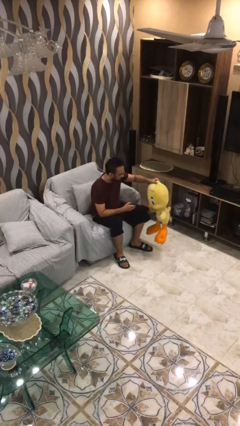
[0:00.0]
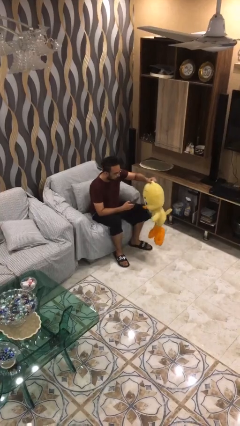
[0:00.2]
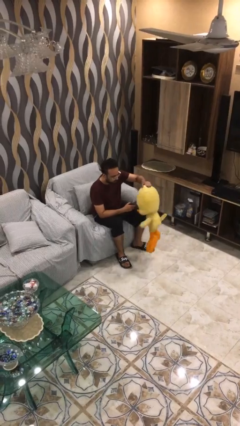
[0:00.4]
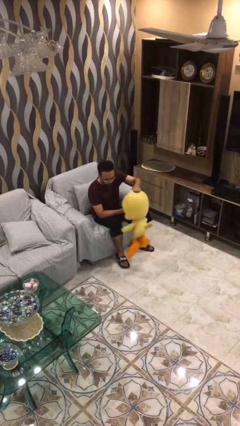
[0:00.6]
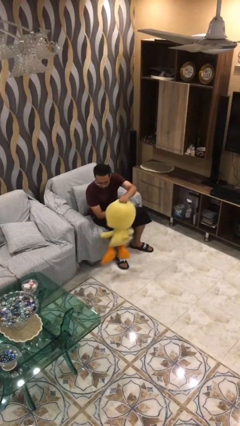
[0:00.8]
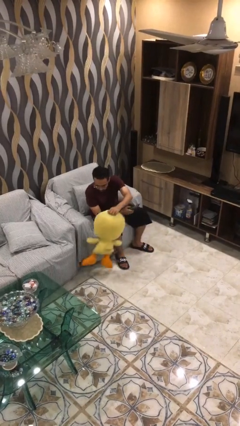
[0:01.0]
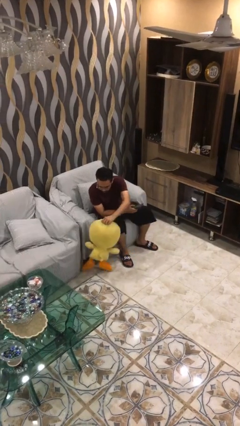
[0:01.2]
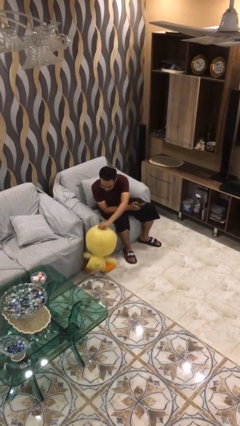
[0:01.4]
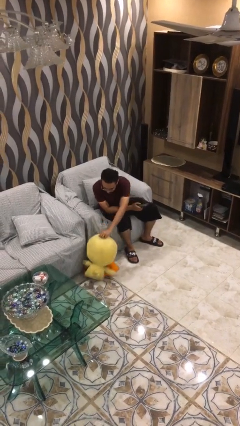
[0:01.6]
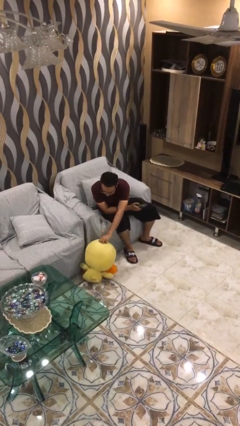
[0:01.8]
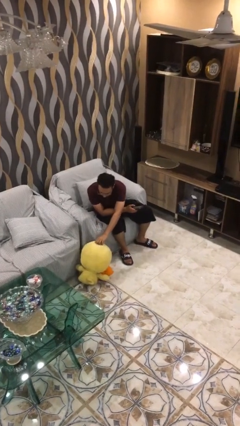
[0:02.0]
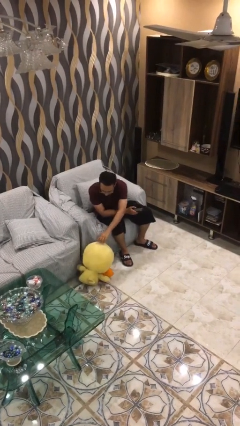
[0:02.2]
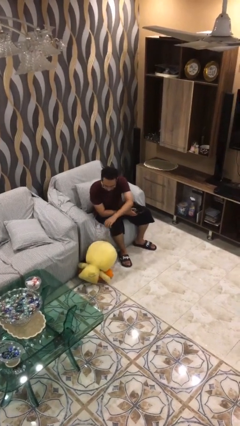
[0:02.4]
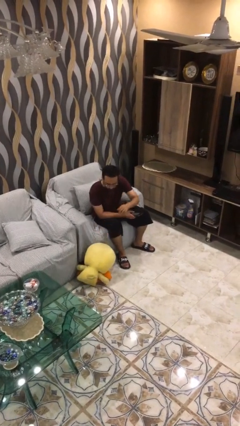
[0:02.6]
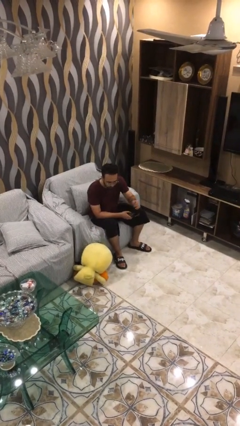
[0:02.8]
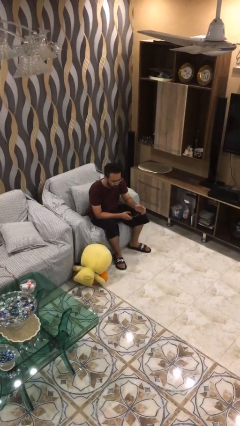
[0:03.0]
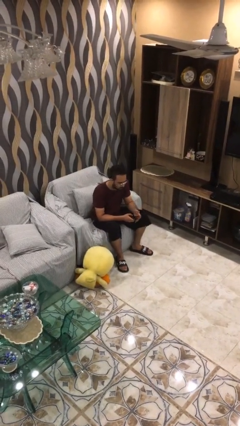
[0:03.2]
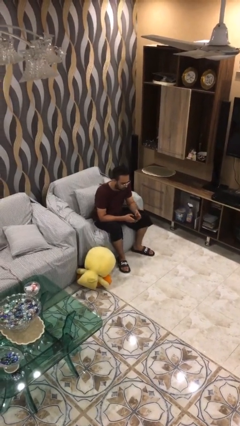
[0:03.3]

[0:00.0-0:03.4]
person puts down object on floor

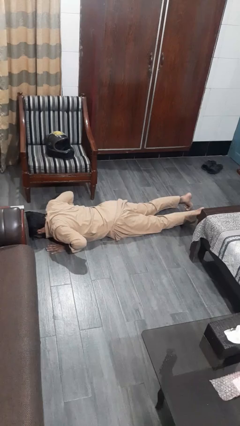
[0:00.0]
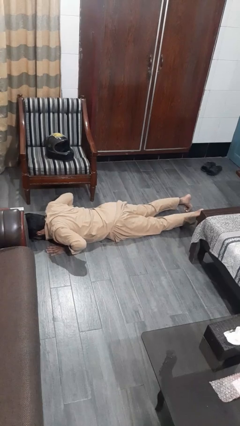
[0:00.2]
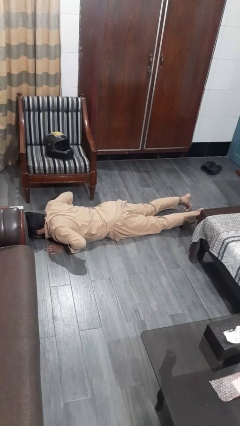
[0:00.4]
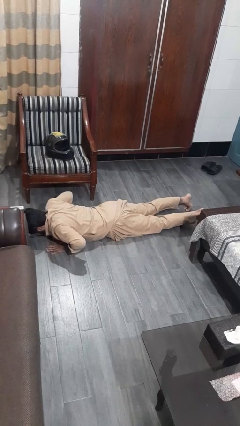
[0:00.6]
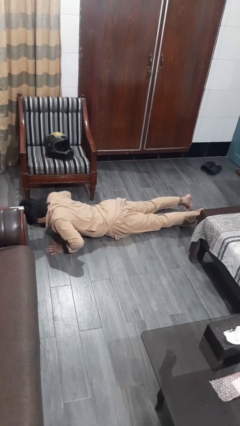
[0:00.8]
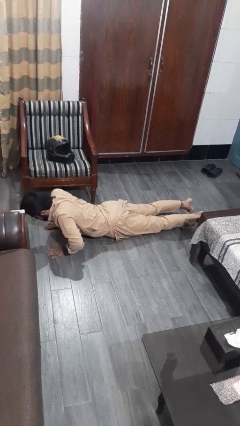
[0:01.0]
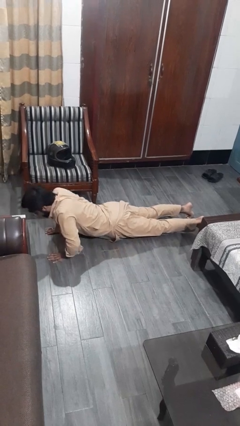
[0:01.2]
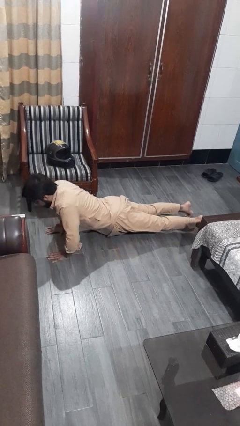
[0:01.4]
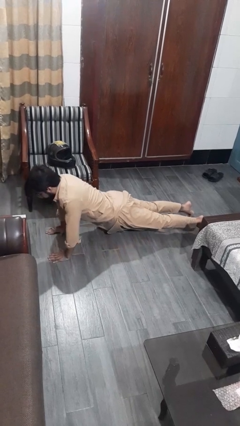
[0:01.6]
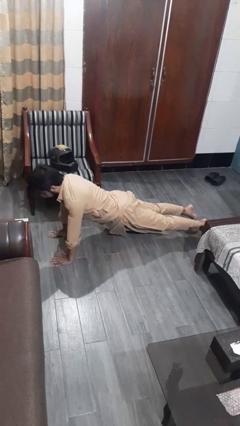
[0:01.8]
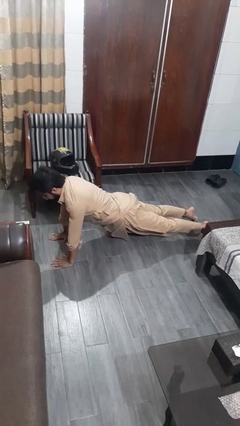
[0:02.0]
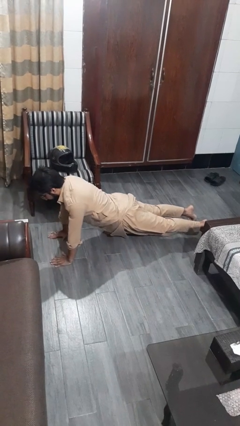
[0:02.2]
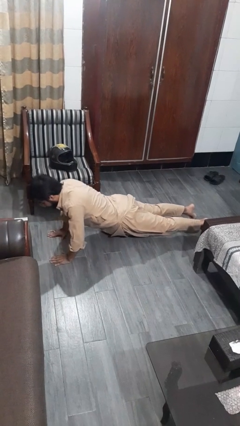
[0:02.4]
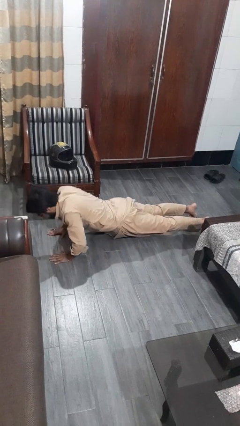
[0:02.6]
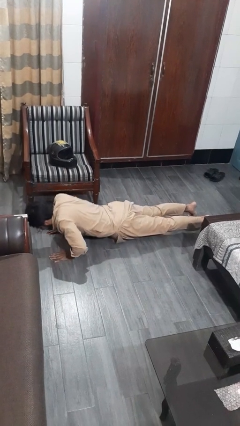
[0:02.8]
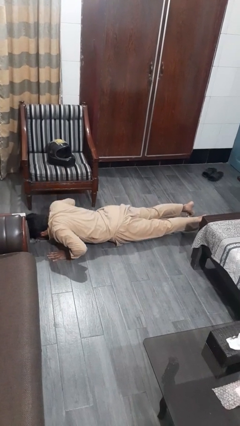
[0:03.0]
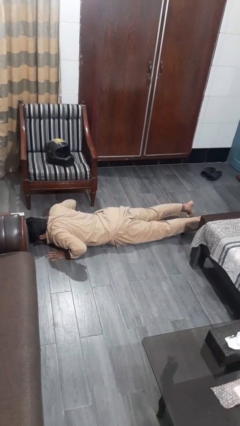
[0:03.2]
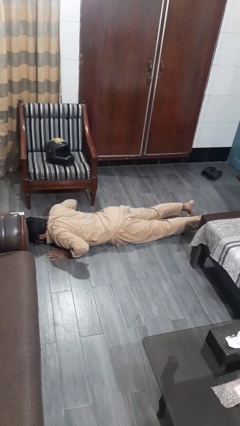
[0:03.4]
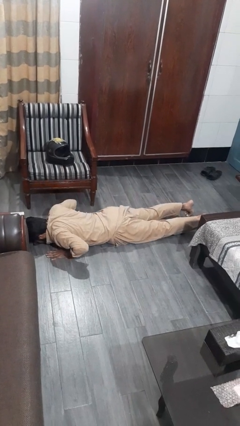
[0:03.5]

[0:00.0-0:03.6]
person exercises with pushup

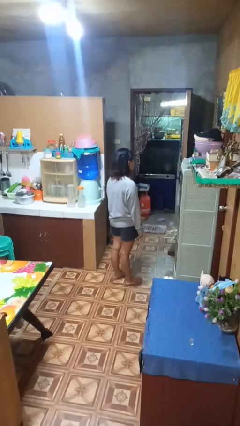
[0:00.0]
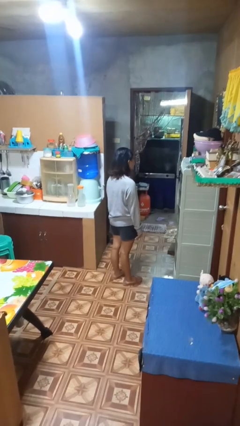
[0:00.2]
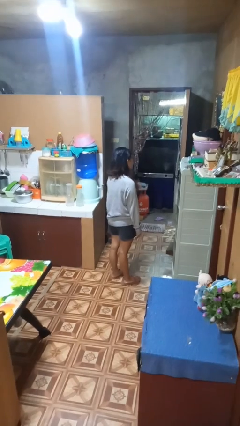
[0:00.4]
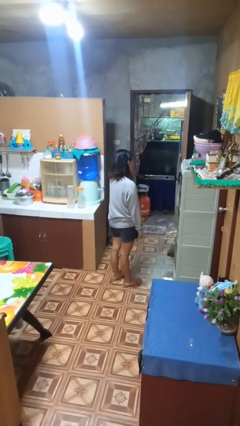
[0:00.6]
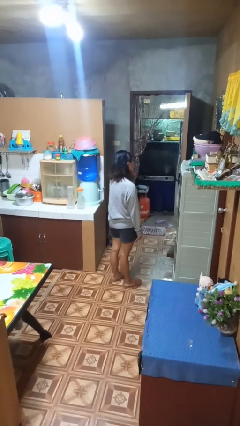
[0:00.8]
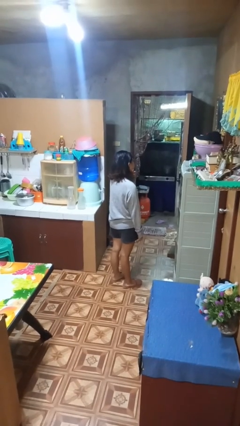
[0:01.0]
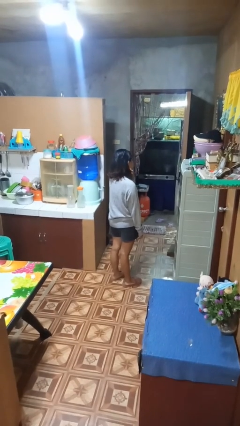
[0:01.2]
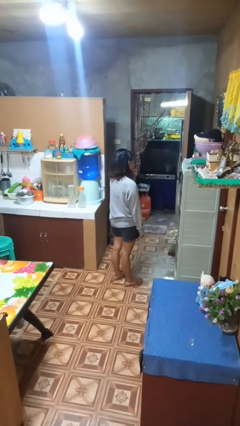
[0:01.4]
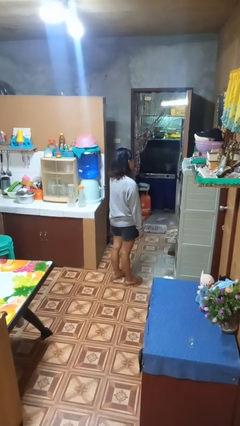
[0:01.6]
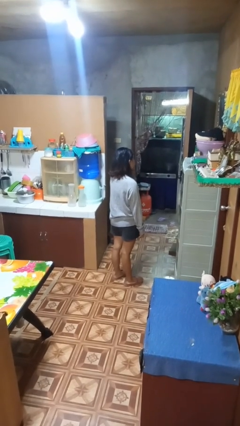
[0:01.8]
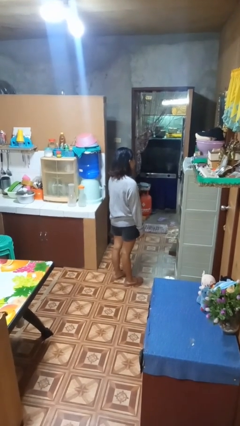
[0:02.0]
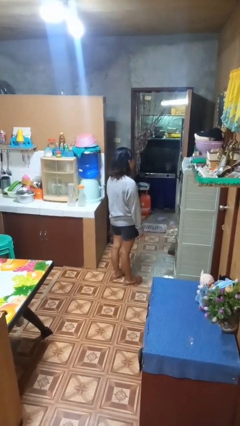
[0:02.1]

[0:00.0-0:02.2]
person strokes chin

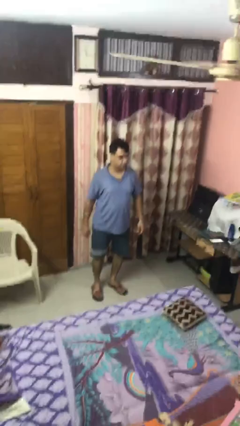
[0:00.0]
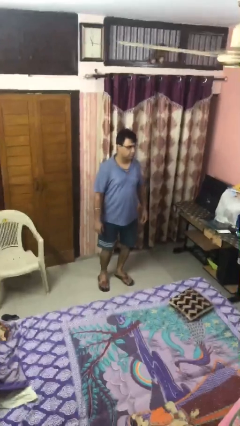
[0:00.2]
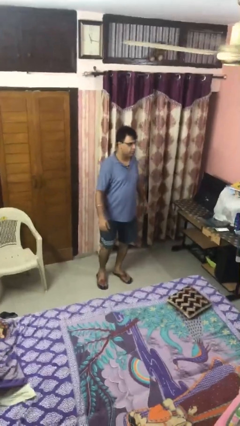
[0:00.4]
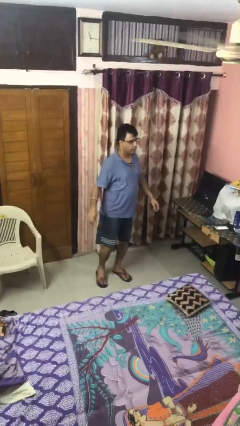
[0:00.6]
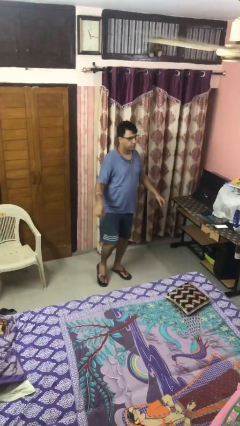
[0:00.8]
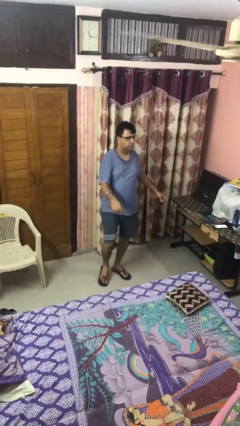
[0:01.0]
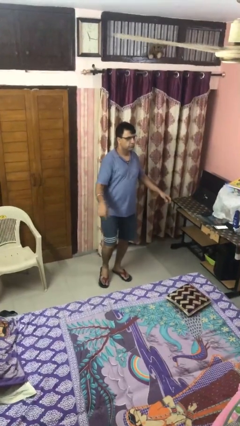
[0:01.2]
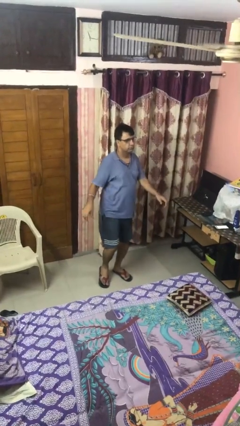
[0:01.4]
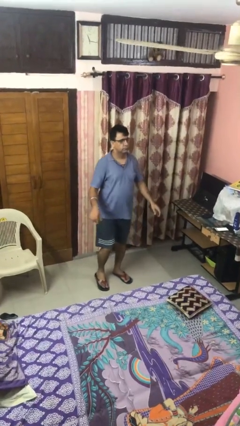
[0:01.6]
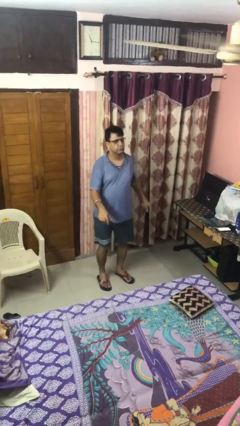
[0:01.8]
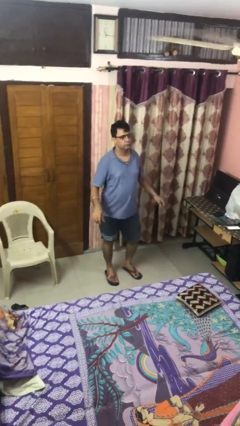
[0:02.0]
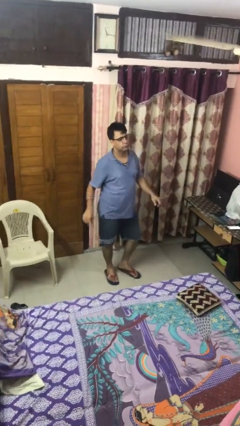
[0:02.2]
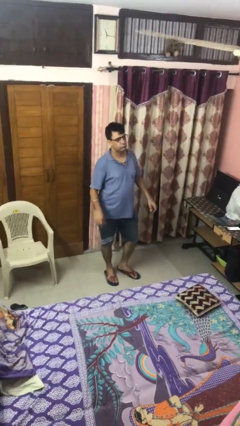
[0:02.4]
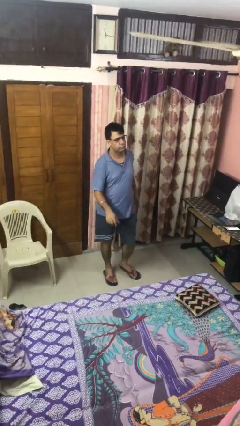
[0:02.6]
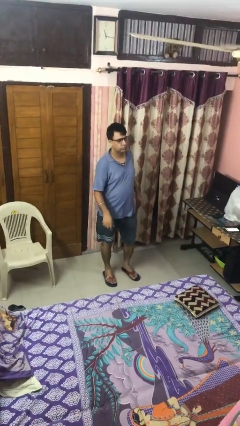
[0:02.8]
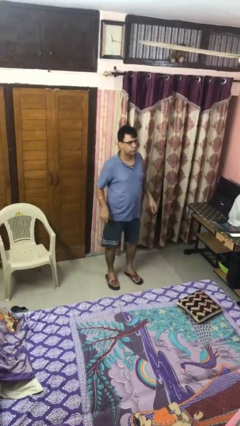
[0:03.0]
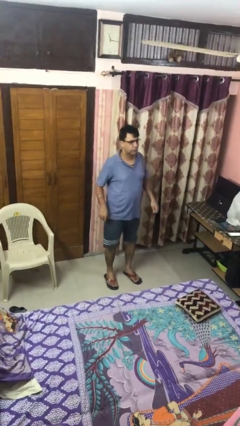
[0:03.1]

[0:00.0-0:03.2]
person dances in place

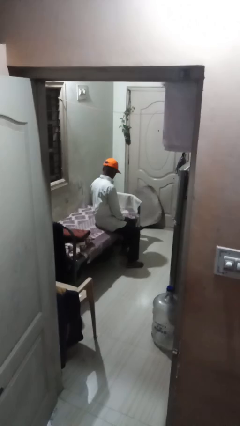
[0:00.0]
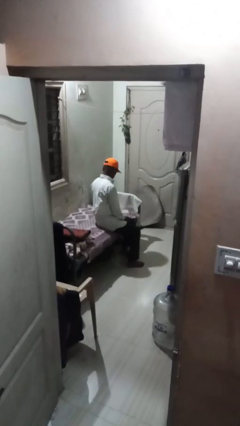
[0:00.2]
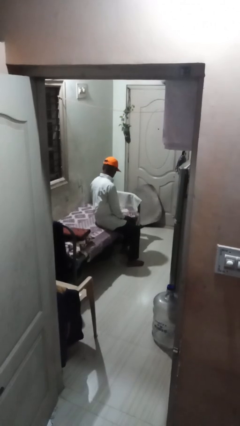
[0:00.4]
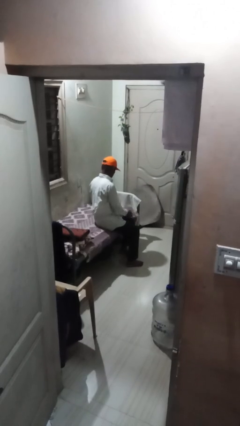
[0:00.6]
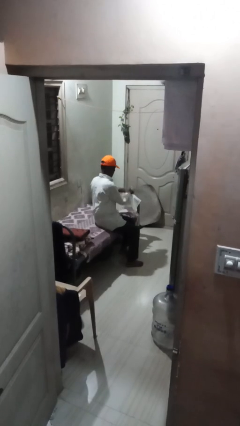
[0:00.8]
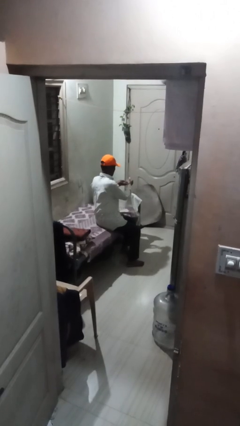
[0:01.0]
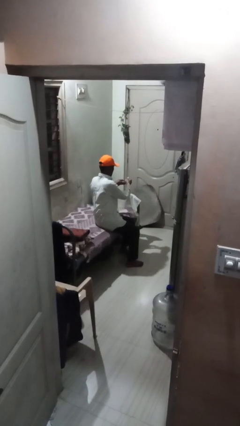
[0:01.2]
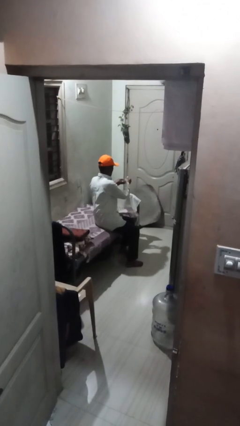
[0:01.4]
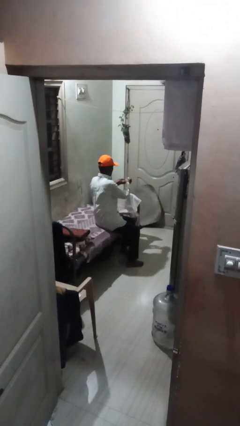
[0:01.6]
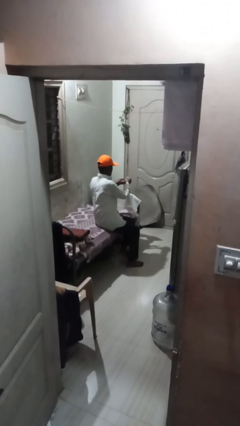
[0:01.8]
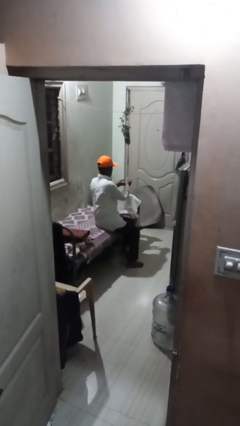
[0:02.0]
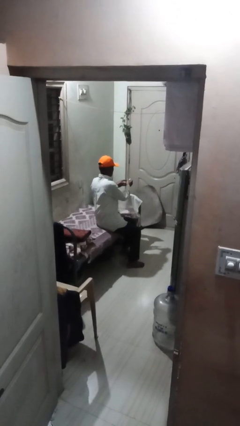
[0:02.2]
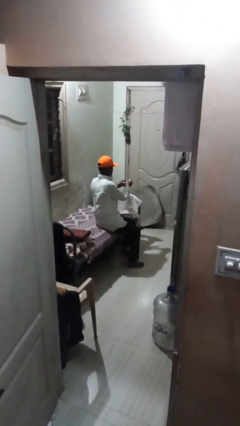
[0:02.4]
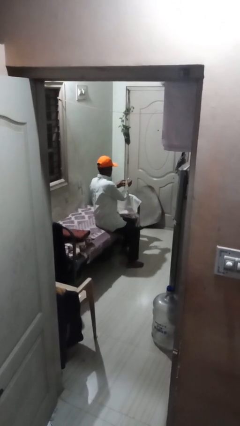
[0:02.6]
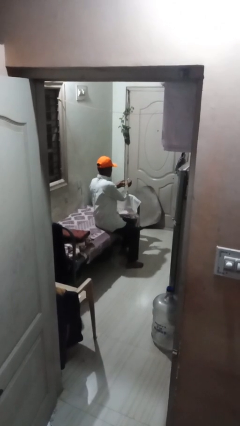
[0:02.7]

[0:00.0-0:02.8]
person clips fingernails

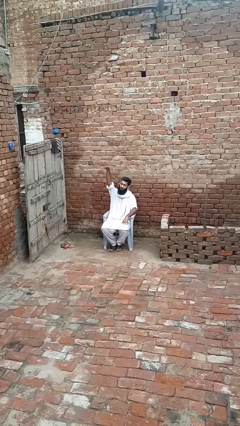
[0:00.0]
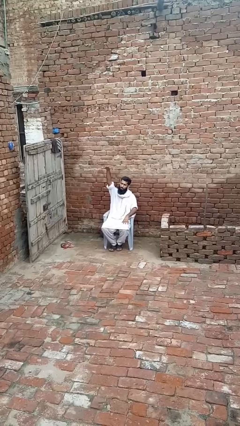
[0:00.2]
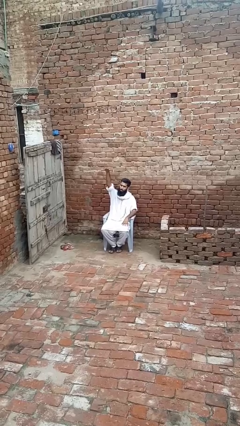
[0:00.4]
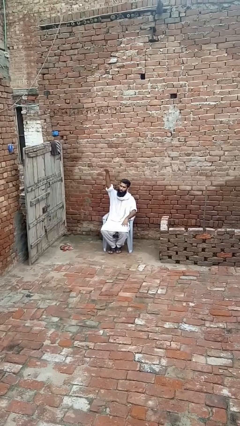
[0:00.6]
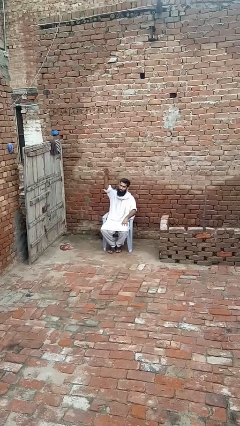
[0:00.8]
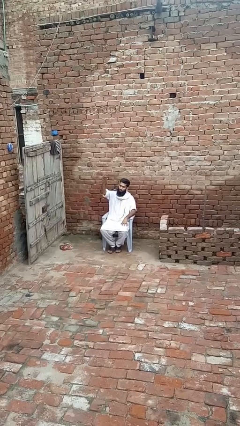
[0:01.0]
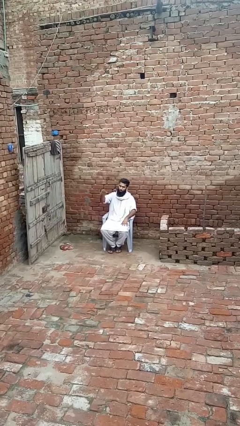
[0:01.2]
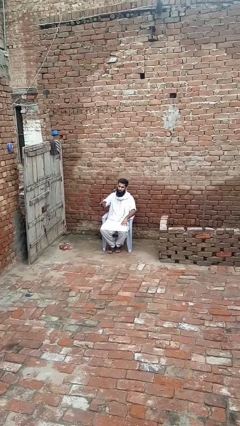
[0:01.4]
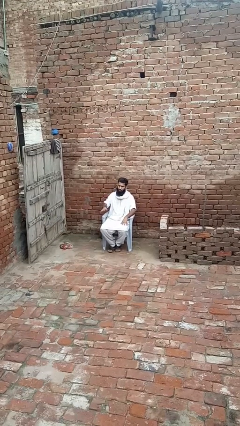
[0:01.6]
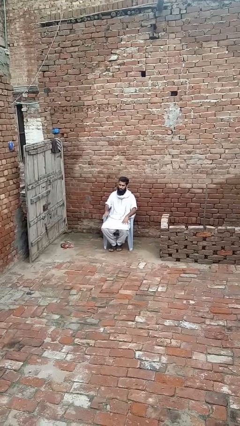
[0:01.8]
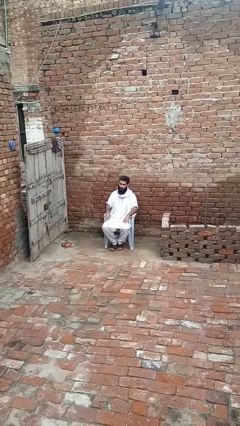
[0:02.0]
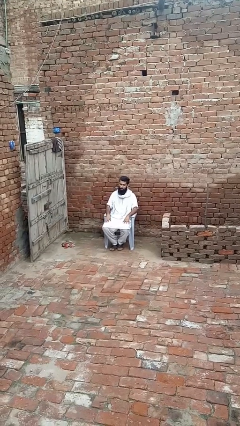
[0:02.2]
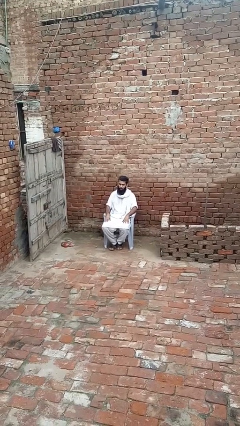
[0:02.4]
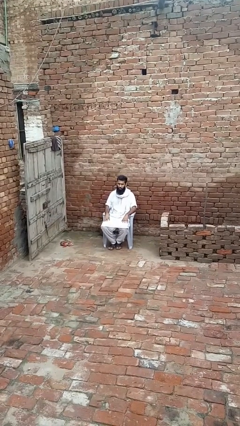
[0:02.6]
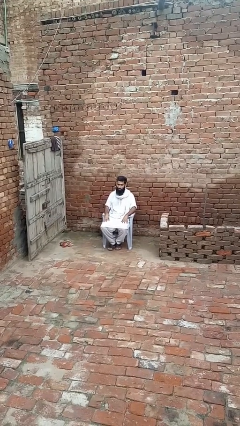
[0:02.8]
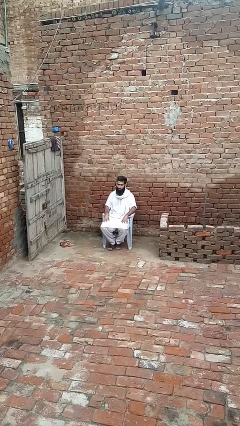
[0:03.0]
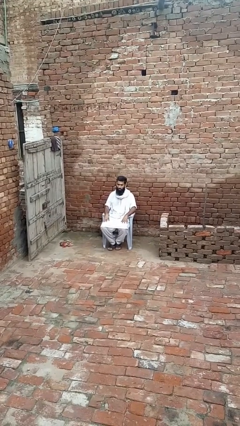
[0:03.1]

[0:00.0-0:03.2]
person gestures swipe down
